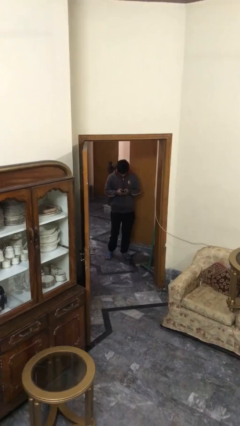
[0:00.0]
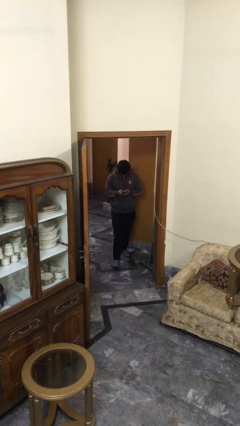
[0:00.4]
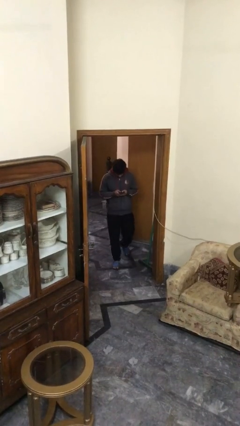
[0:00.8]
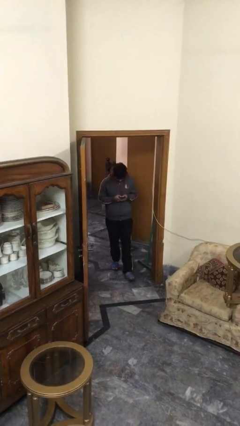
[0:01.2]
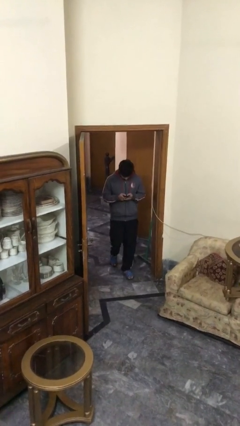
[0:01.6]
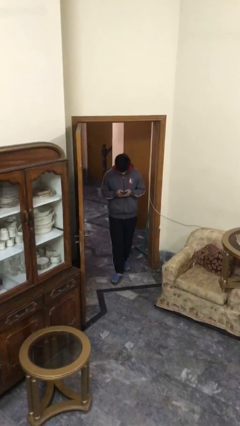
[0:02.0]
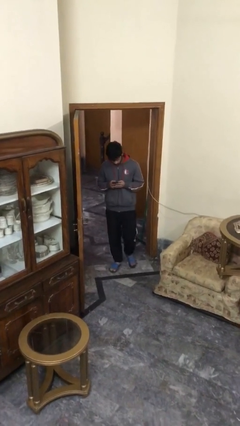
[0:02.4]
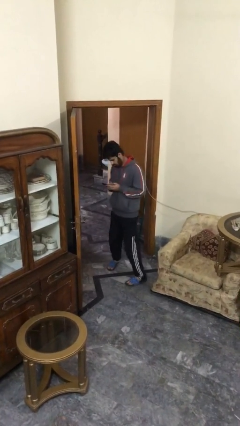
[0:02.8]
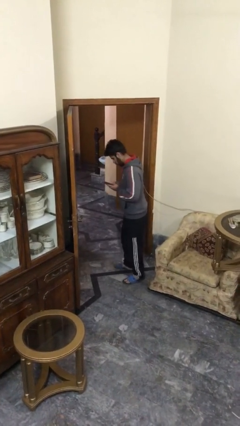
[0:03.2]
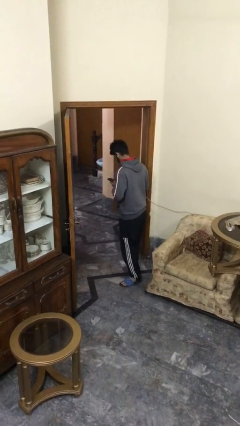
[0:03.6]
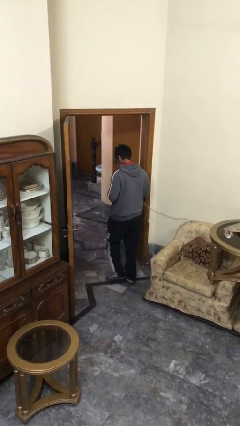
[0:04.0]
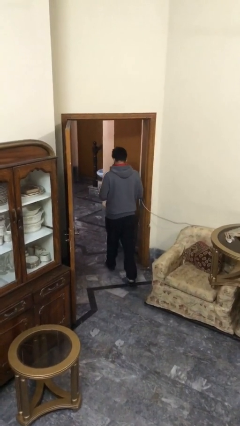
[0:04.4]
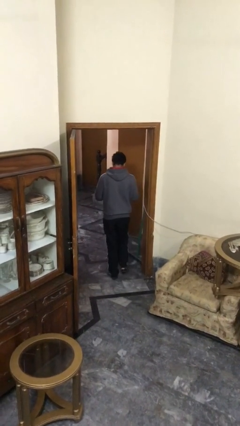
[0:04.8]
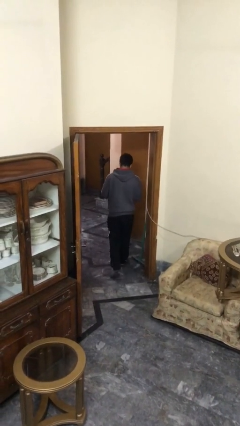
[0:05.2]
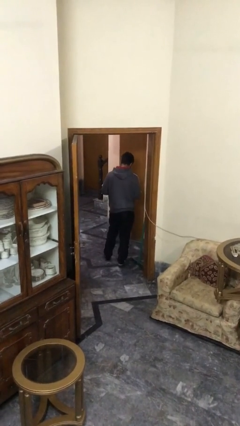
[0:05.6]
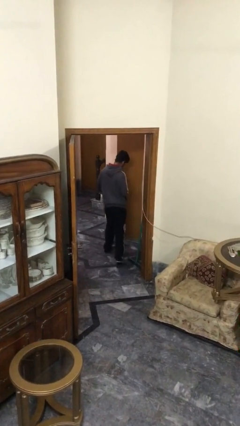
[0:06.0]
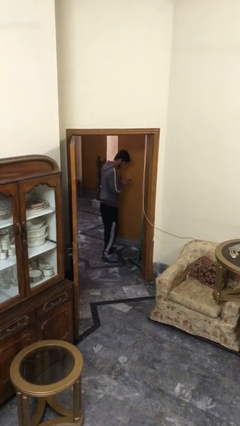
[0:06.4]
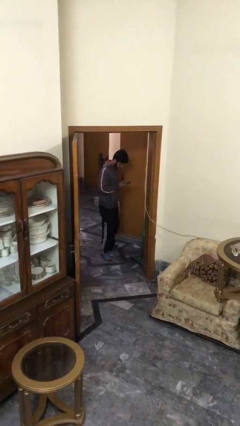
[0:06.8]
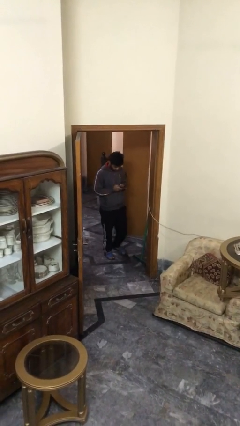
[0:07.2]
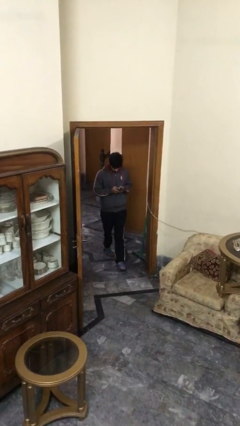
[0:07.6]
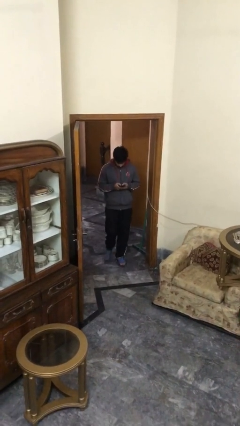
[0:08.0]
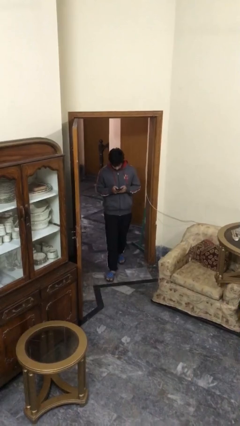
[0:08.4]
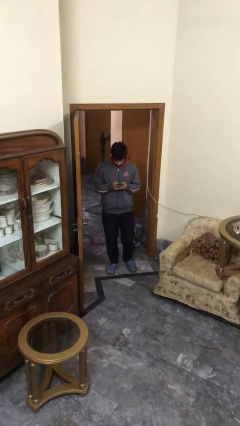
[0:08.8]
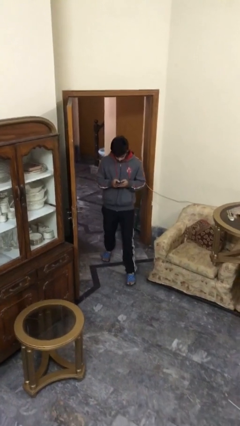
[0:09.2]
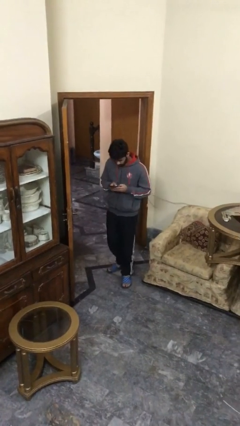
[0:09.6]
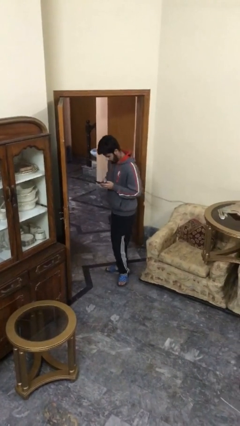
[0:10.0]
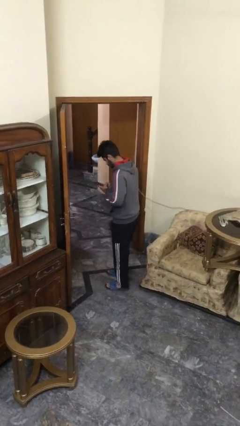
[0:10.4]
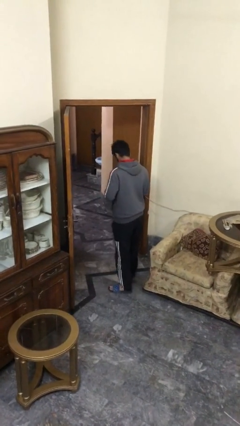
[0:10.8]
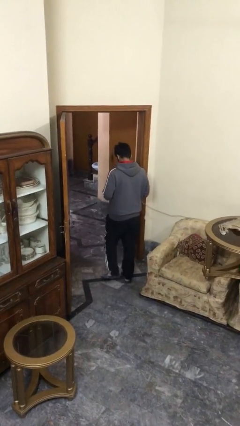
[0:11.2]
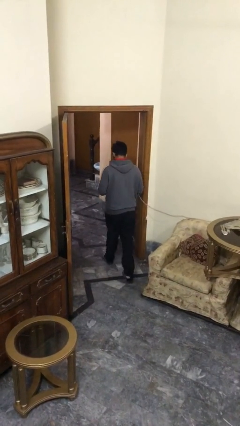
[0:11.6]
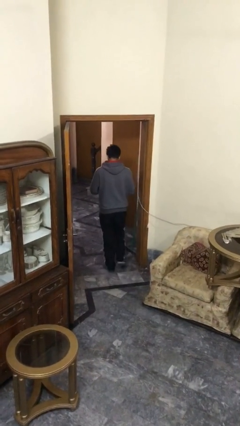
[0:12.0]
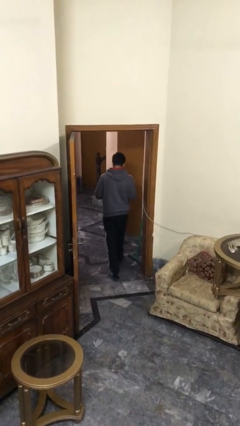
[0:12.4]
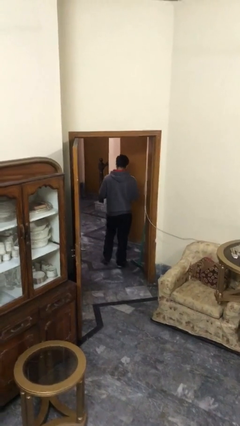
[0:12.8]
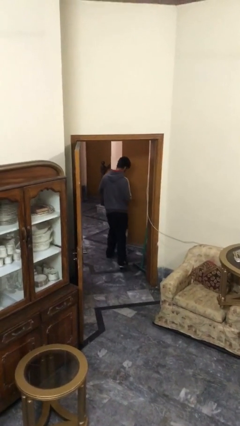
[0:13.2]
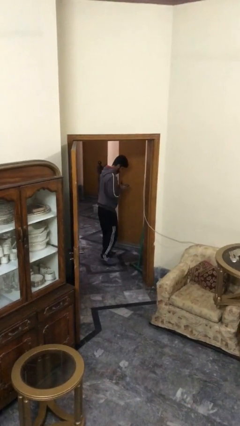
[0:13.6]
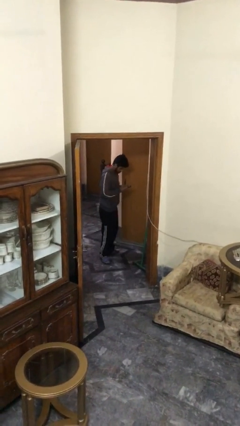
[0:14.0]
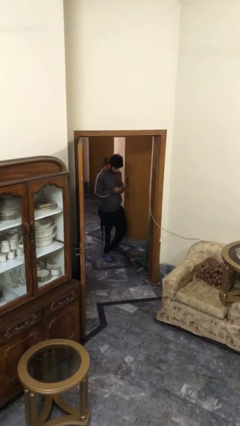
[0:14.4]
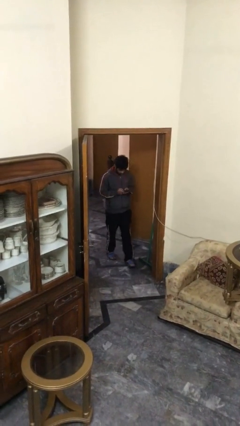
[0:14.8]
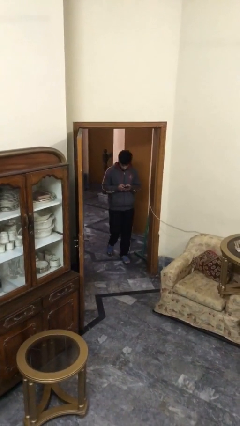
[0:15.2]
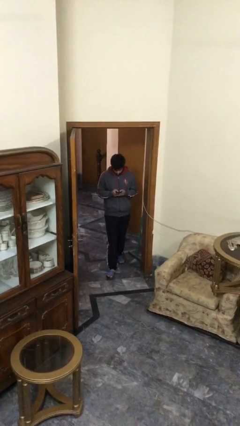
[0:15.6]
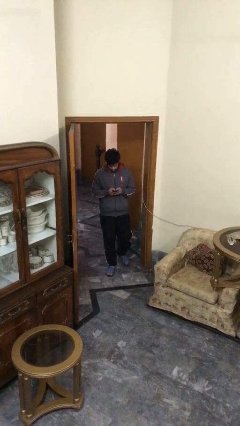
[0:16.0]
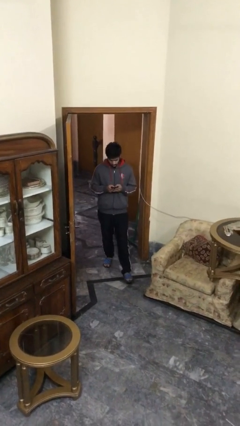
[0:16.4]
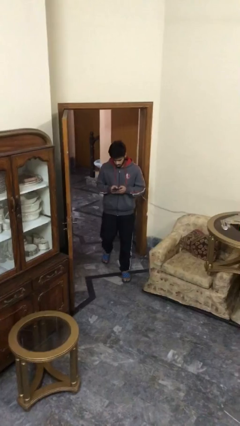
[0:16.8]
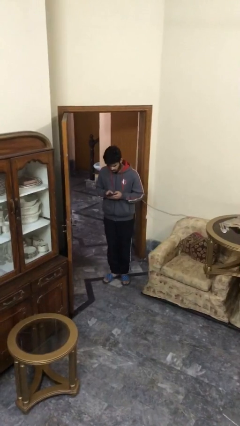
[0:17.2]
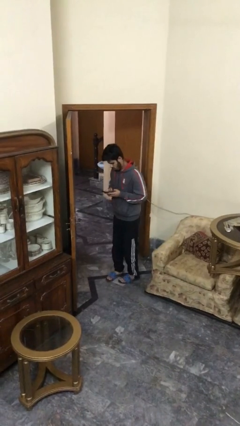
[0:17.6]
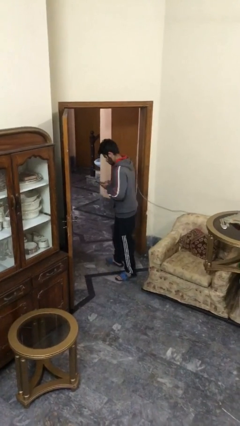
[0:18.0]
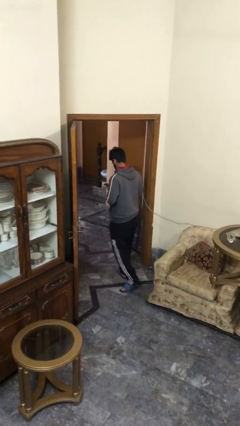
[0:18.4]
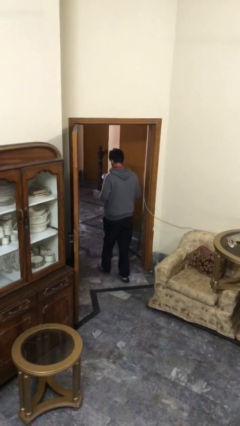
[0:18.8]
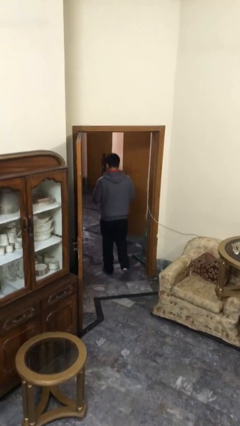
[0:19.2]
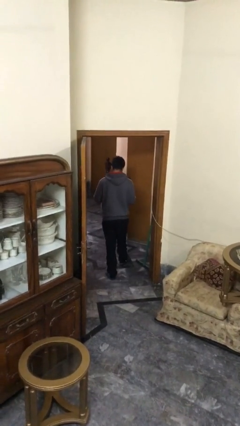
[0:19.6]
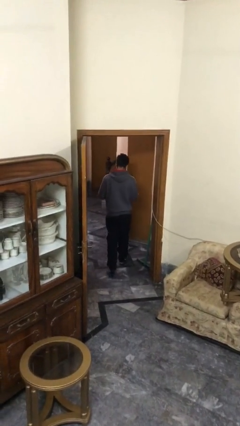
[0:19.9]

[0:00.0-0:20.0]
person texts on phone

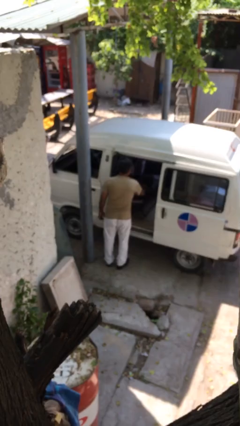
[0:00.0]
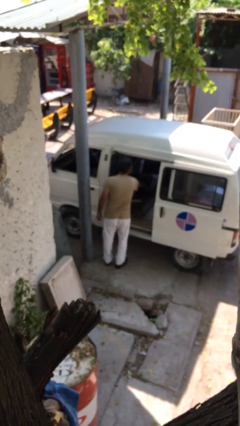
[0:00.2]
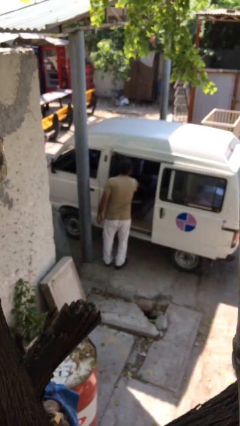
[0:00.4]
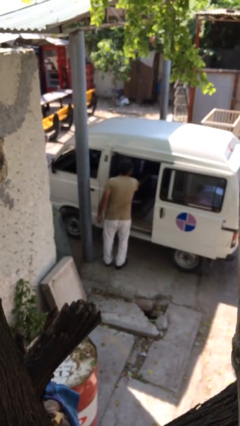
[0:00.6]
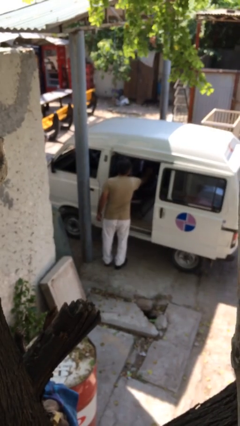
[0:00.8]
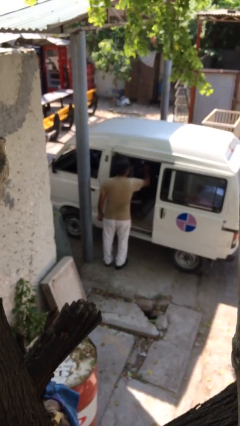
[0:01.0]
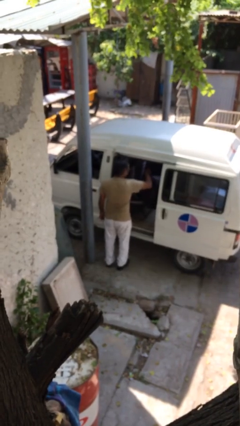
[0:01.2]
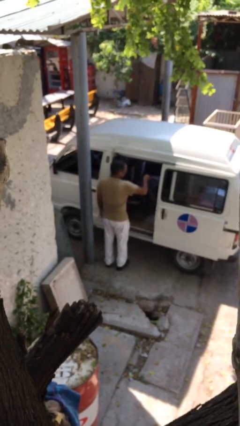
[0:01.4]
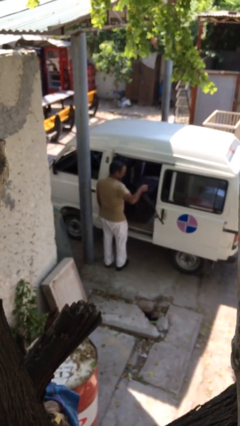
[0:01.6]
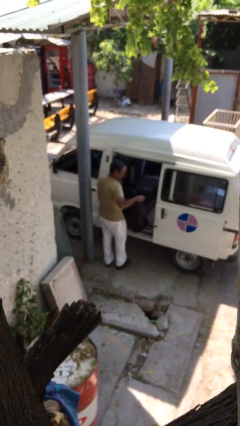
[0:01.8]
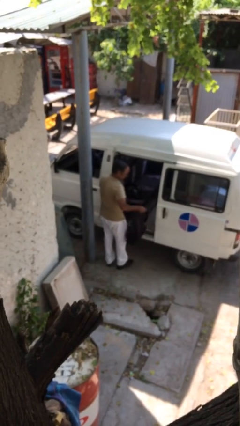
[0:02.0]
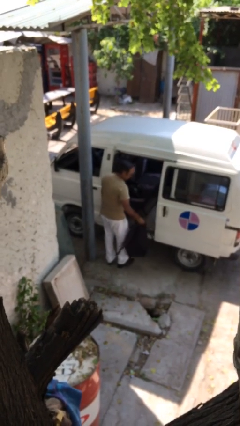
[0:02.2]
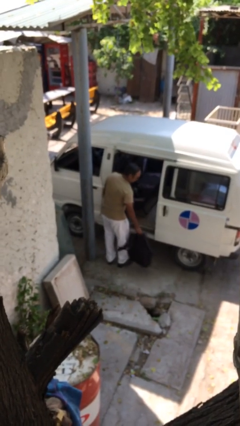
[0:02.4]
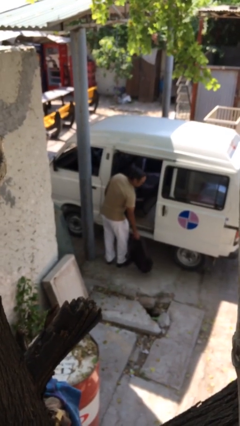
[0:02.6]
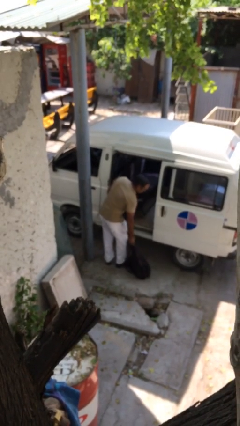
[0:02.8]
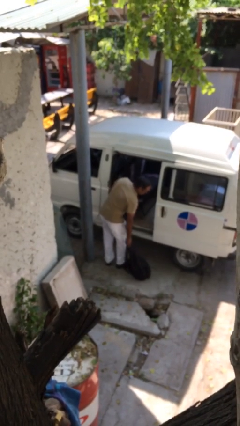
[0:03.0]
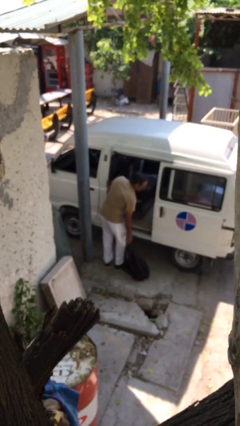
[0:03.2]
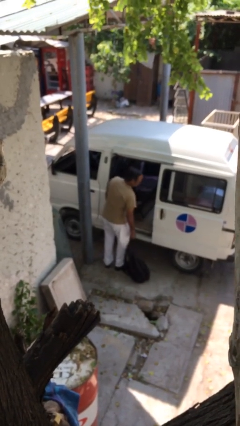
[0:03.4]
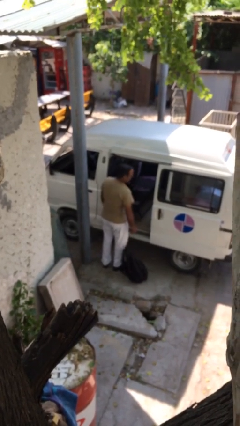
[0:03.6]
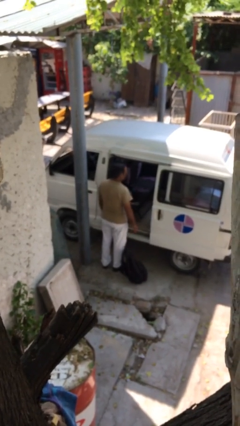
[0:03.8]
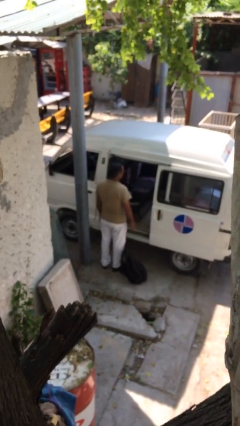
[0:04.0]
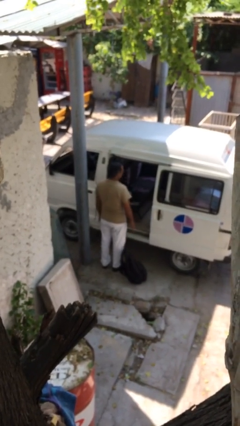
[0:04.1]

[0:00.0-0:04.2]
person unloads car

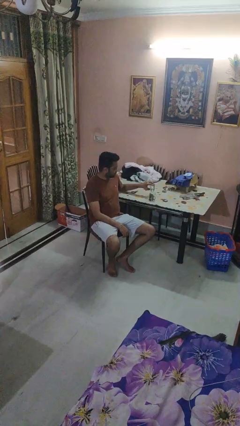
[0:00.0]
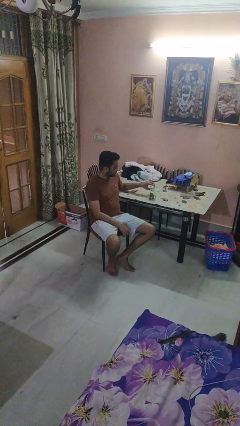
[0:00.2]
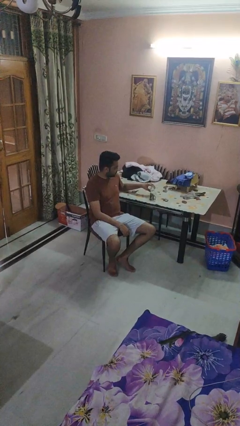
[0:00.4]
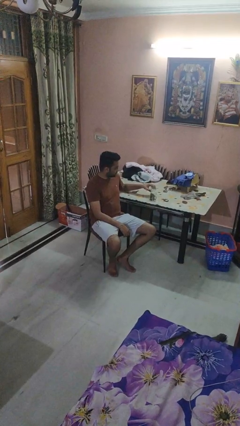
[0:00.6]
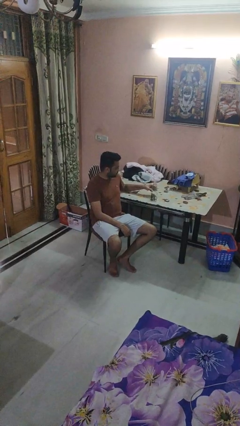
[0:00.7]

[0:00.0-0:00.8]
person pours liquid into cup

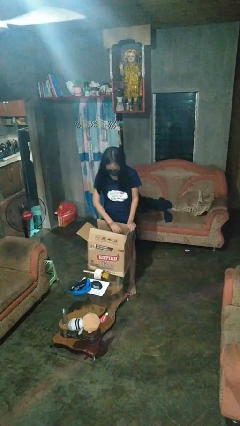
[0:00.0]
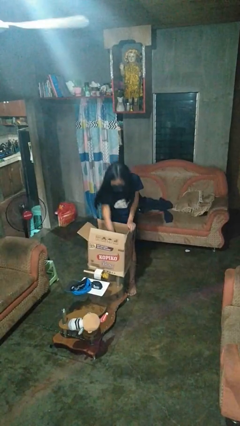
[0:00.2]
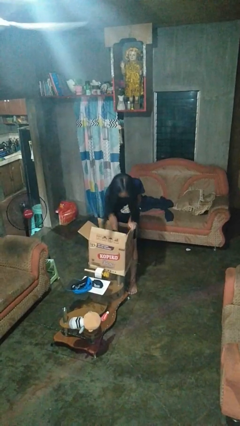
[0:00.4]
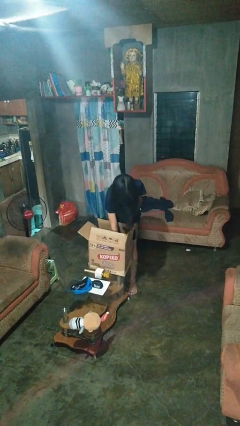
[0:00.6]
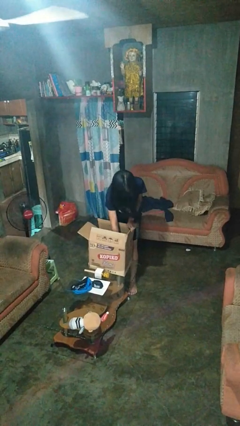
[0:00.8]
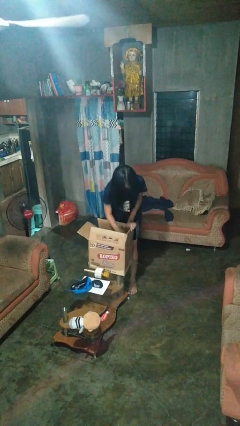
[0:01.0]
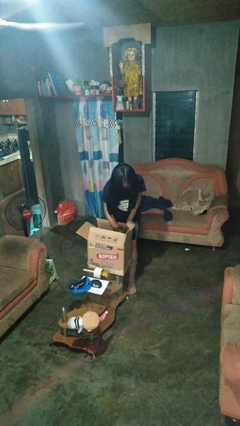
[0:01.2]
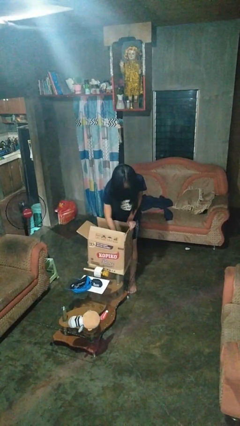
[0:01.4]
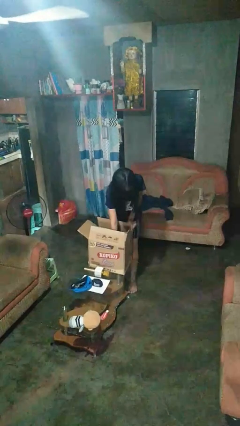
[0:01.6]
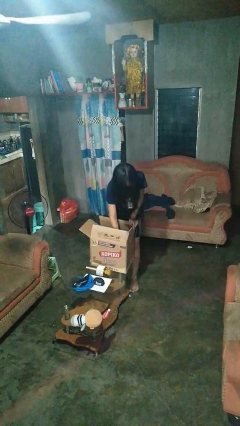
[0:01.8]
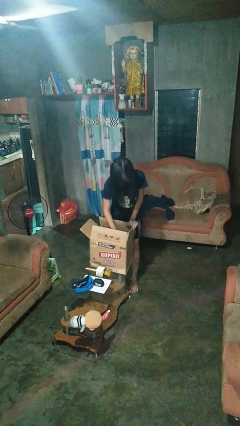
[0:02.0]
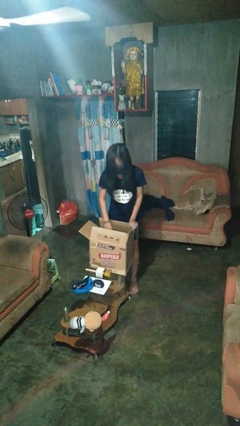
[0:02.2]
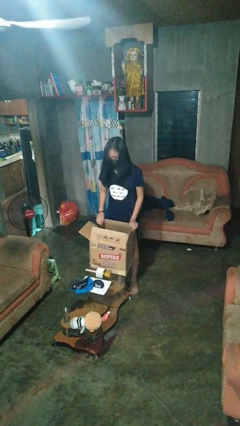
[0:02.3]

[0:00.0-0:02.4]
person searches in box

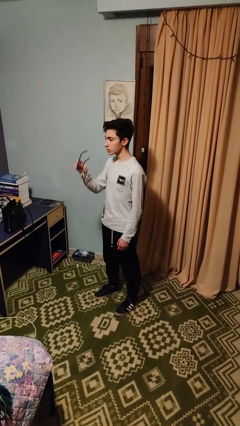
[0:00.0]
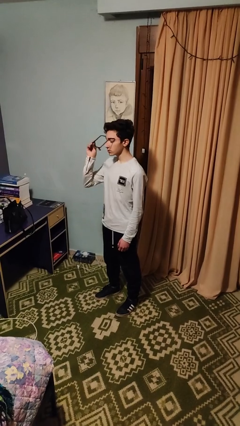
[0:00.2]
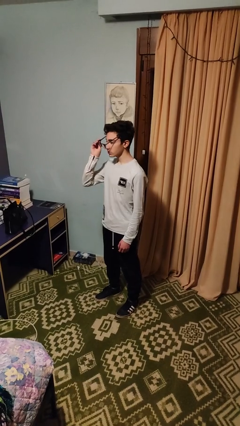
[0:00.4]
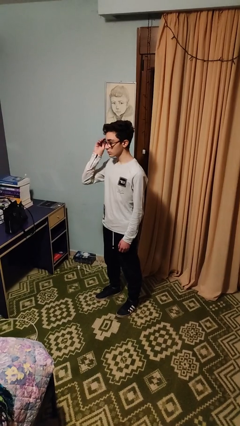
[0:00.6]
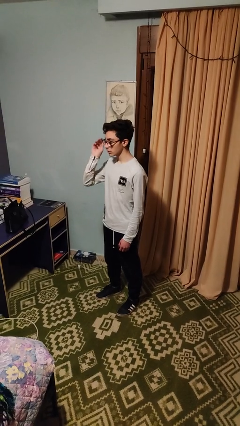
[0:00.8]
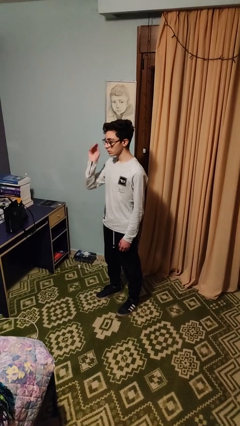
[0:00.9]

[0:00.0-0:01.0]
person puts on glasses
